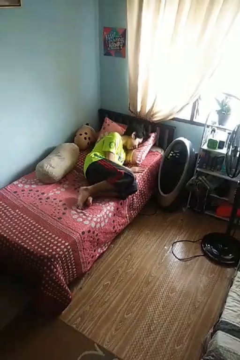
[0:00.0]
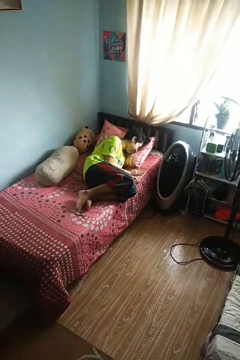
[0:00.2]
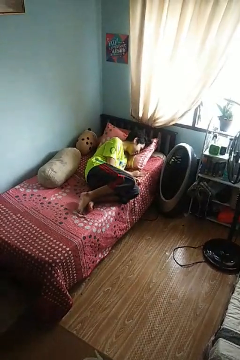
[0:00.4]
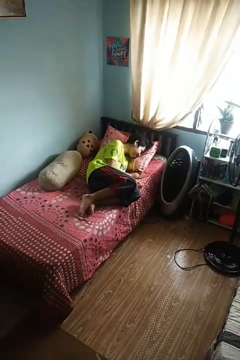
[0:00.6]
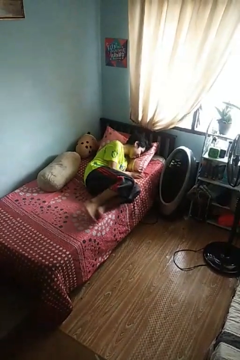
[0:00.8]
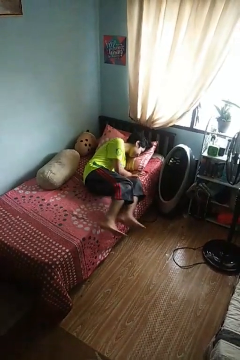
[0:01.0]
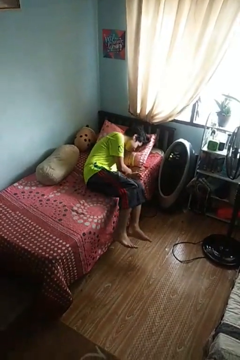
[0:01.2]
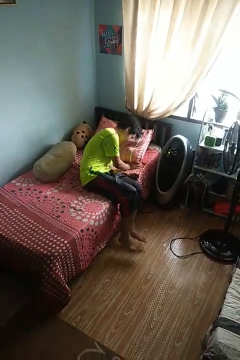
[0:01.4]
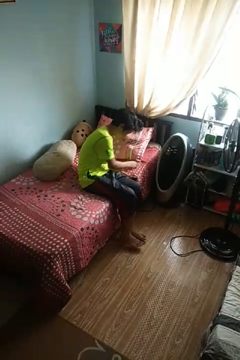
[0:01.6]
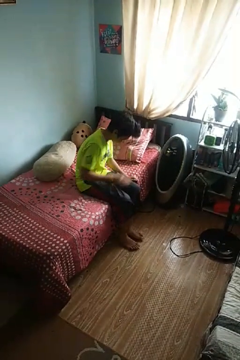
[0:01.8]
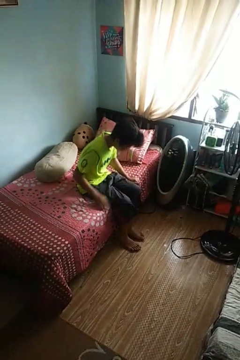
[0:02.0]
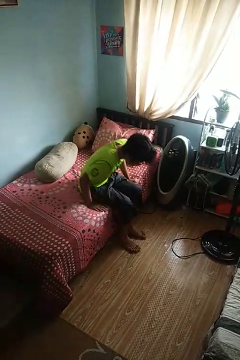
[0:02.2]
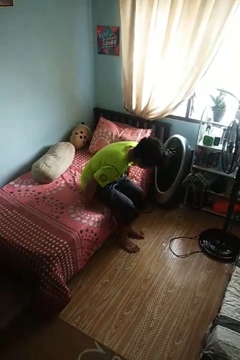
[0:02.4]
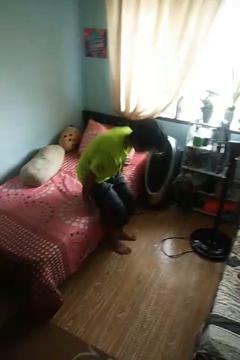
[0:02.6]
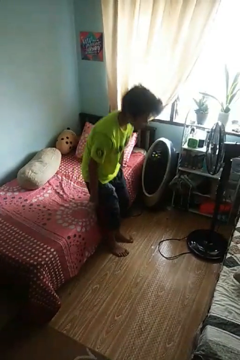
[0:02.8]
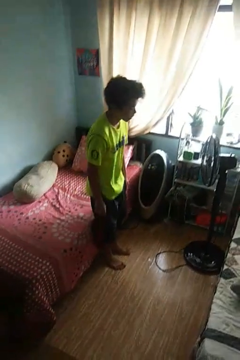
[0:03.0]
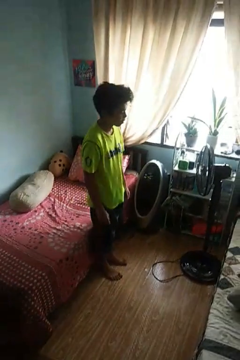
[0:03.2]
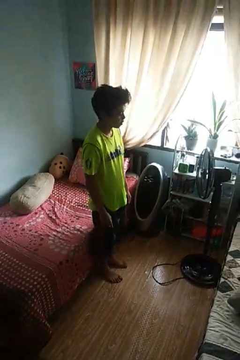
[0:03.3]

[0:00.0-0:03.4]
person stands up

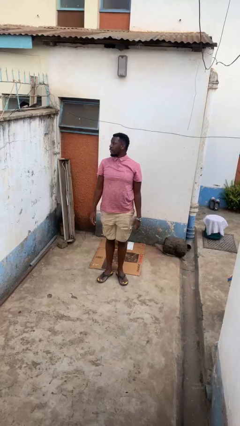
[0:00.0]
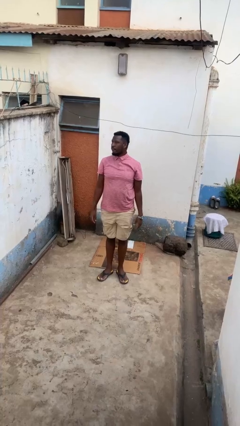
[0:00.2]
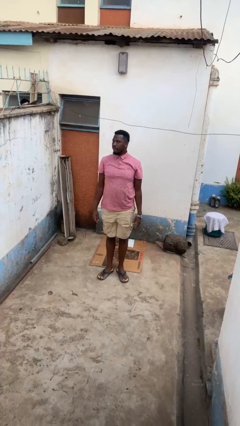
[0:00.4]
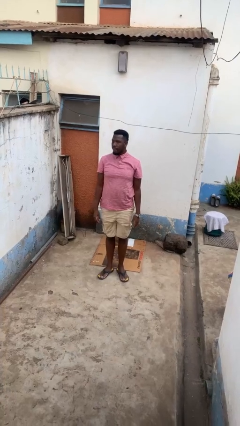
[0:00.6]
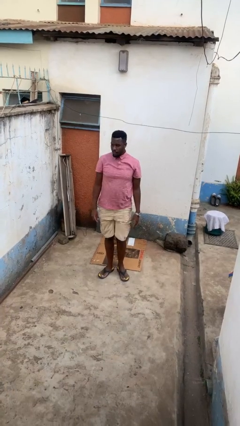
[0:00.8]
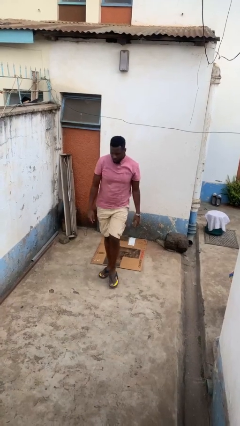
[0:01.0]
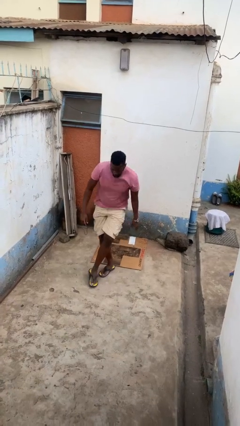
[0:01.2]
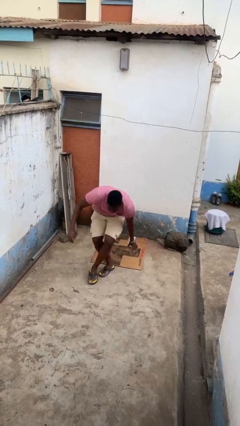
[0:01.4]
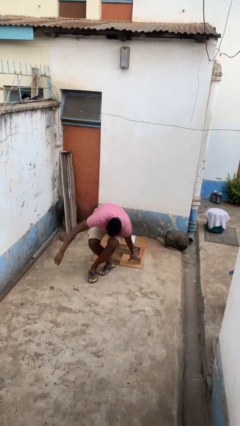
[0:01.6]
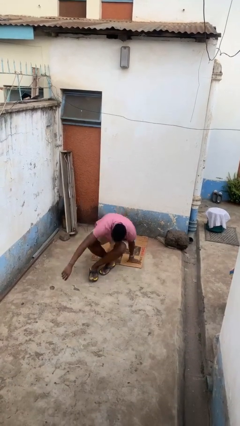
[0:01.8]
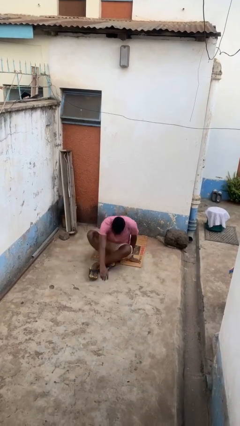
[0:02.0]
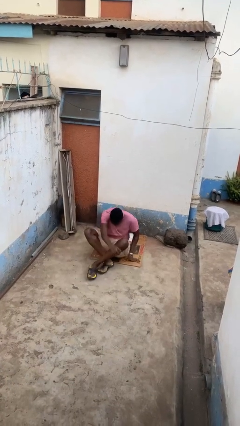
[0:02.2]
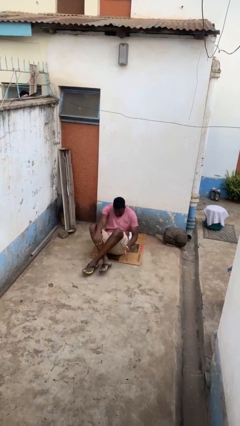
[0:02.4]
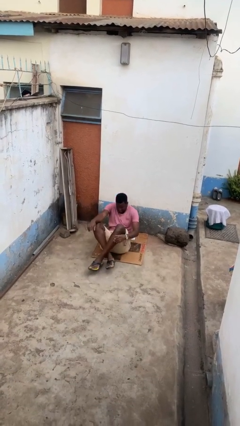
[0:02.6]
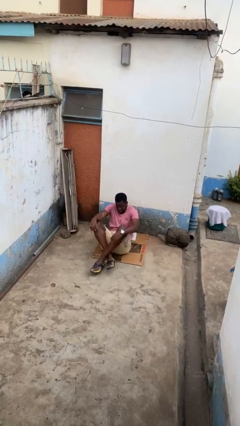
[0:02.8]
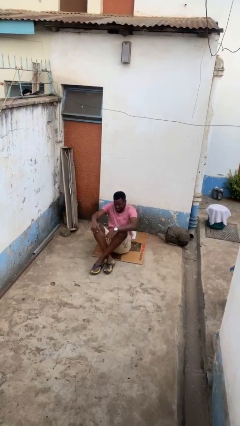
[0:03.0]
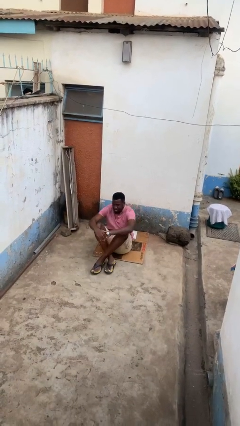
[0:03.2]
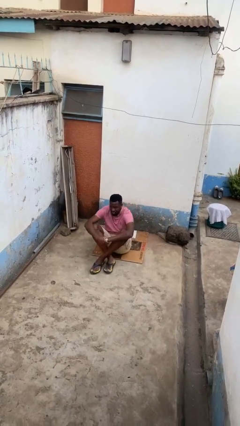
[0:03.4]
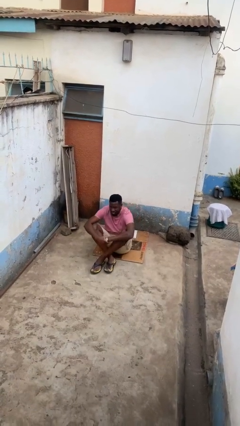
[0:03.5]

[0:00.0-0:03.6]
person sits crisscross

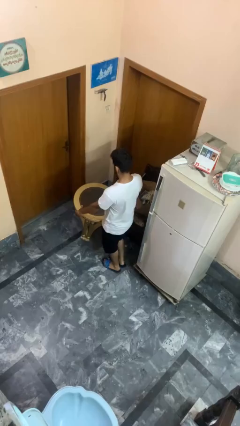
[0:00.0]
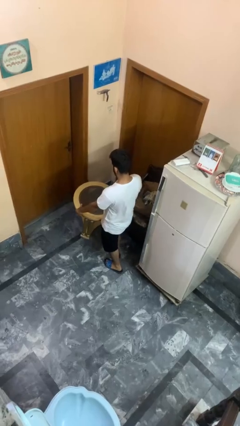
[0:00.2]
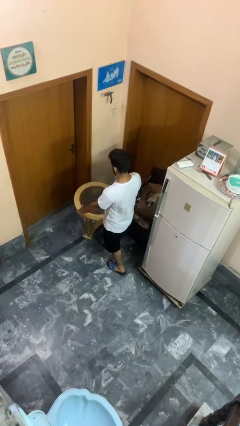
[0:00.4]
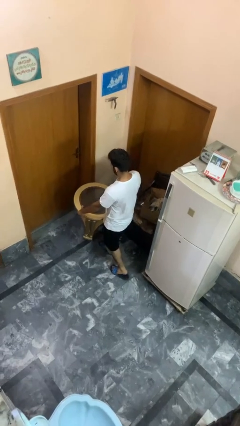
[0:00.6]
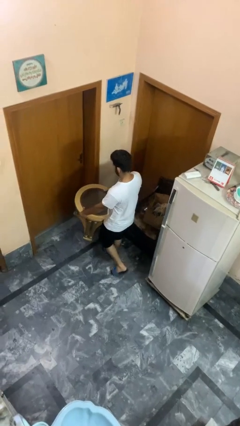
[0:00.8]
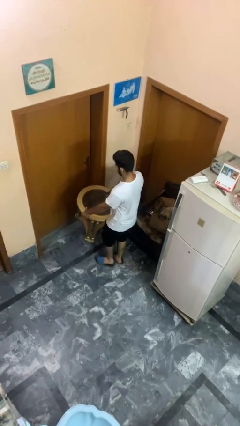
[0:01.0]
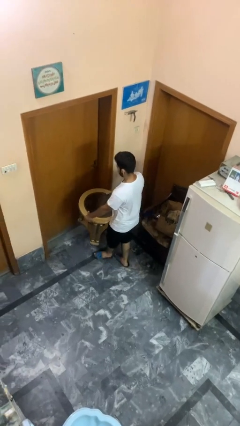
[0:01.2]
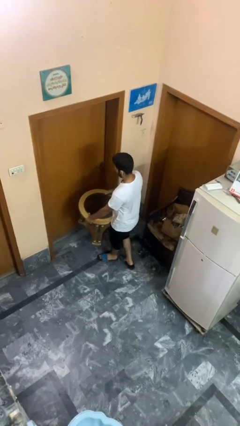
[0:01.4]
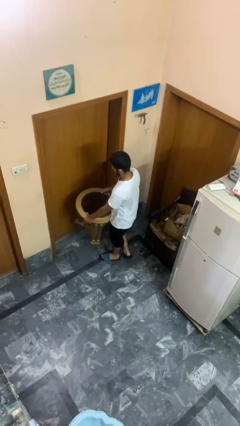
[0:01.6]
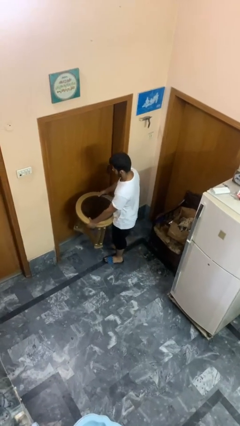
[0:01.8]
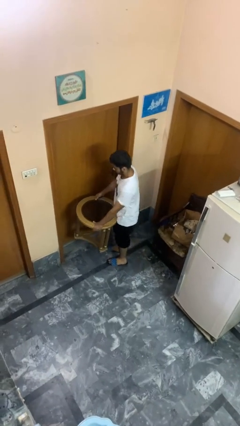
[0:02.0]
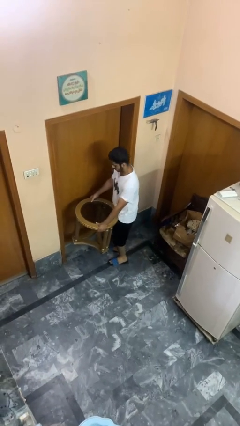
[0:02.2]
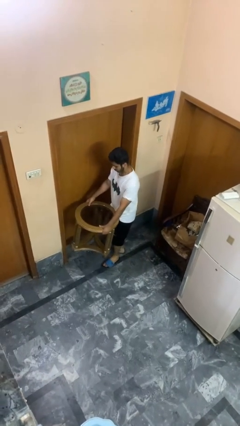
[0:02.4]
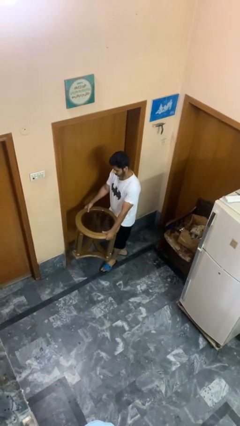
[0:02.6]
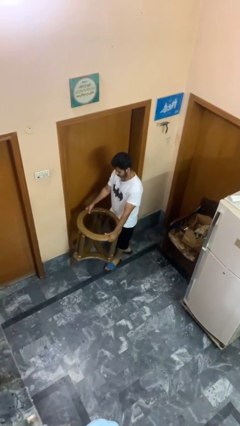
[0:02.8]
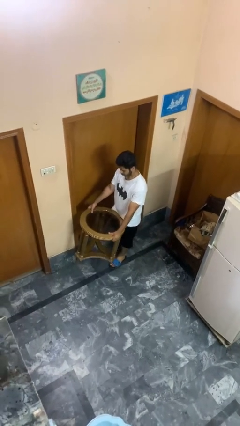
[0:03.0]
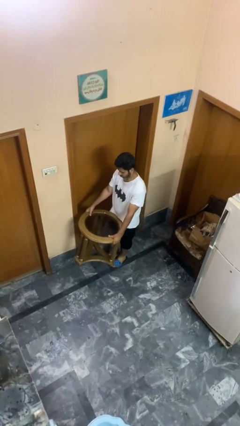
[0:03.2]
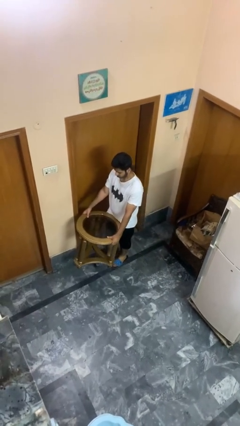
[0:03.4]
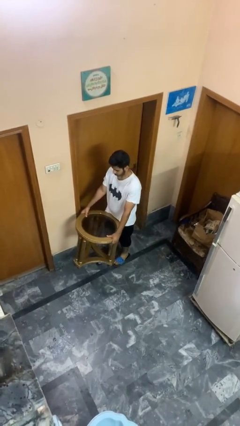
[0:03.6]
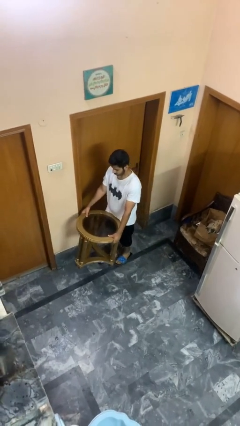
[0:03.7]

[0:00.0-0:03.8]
person carries furniture

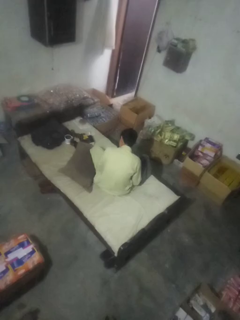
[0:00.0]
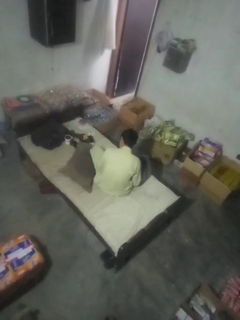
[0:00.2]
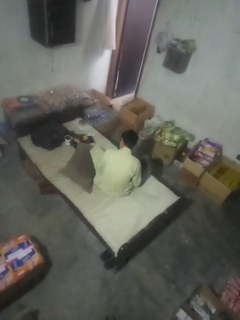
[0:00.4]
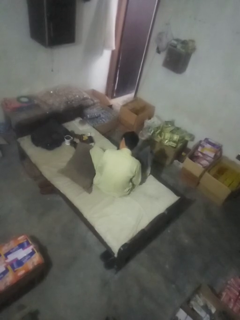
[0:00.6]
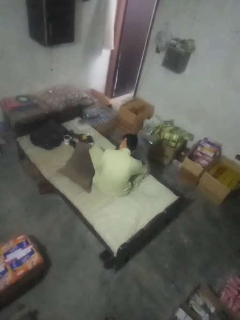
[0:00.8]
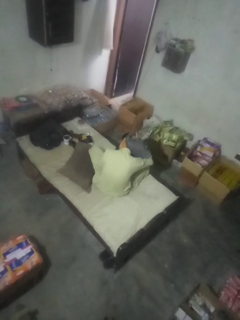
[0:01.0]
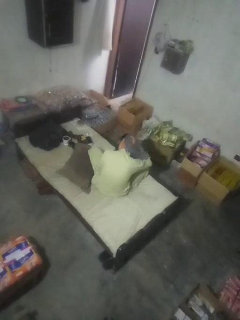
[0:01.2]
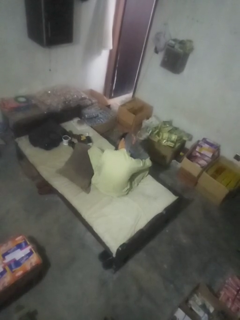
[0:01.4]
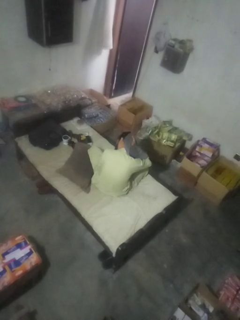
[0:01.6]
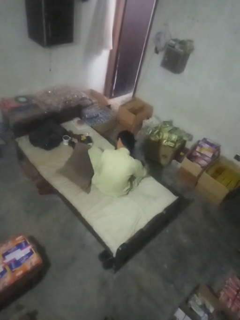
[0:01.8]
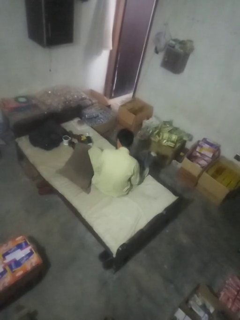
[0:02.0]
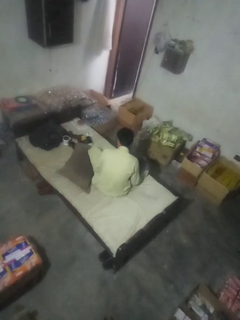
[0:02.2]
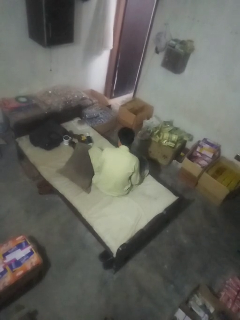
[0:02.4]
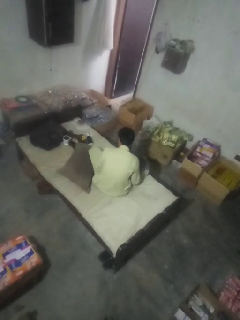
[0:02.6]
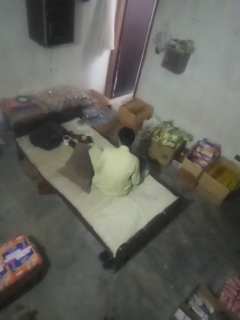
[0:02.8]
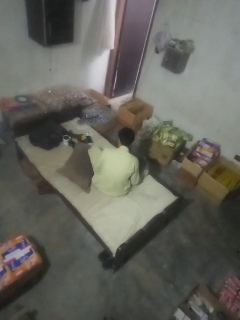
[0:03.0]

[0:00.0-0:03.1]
person dries hair with towel

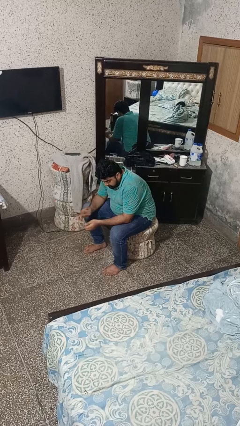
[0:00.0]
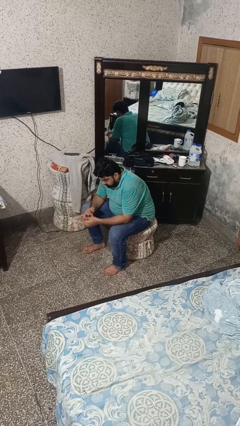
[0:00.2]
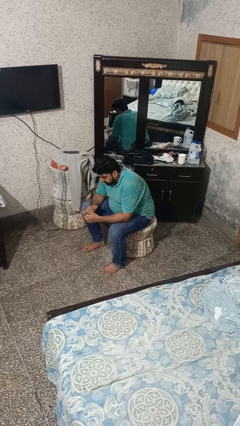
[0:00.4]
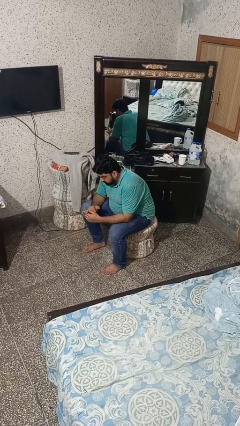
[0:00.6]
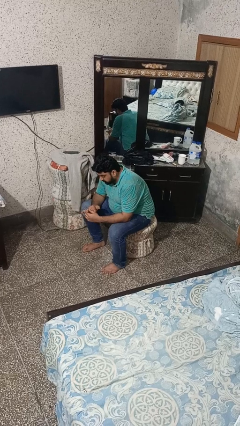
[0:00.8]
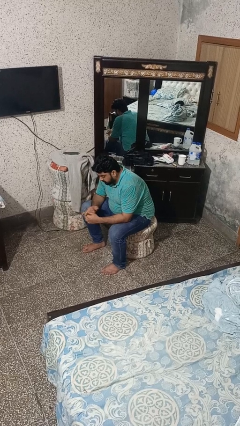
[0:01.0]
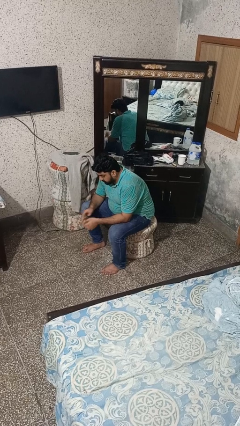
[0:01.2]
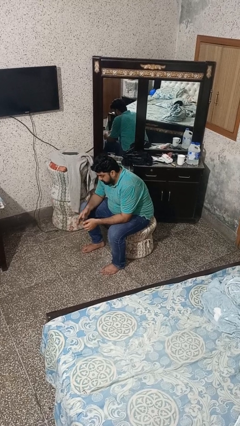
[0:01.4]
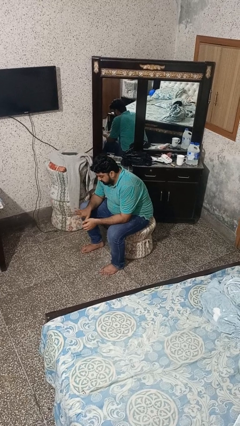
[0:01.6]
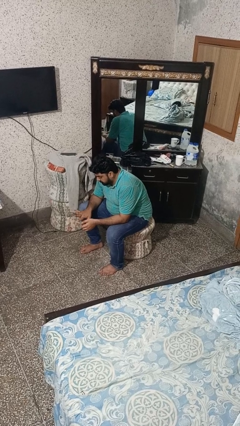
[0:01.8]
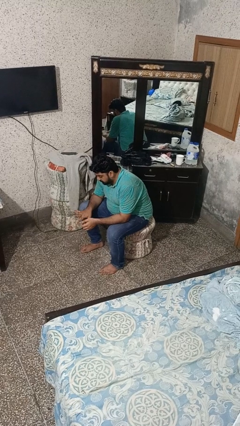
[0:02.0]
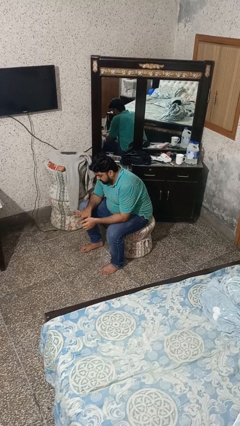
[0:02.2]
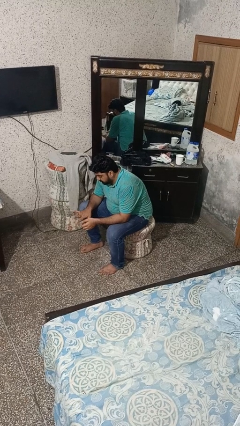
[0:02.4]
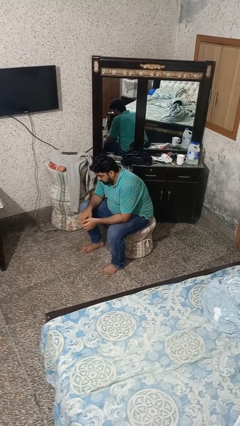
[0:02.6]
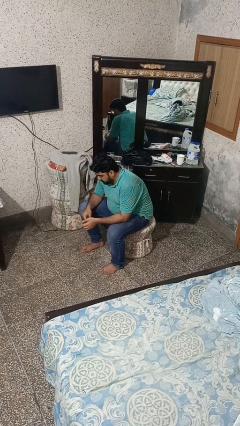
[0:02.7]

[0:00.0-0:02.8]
person puts on ring

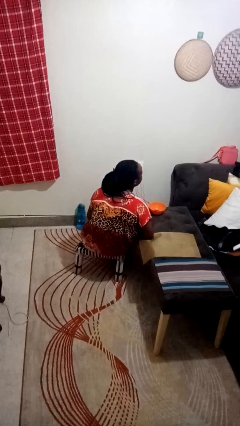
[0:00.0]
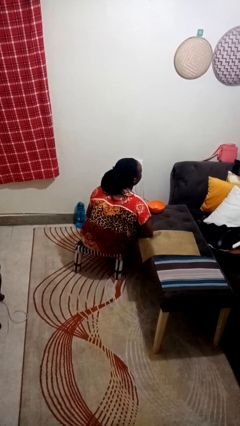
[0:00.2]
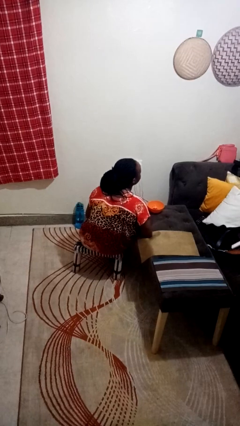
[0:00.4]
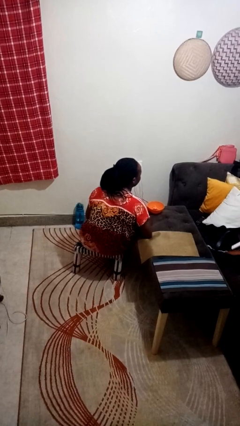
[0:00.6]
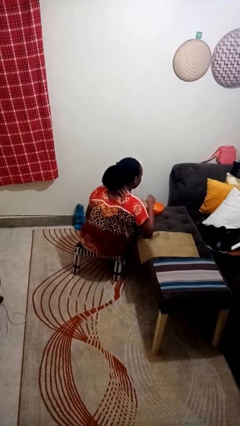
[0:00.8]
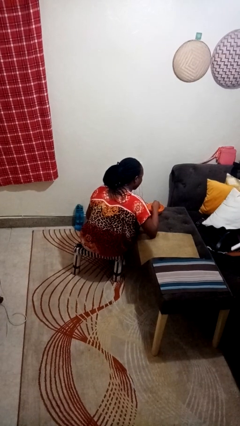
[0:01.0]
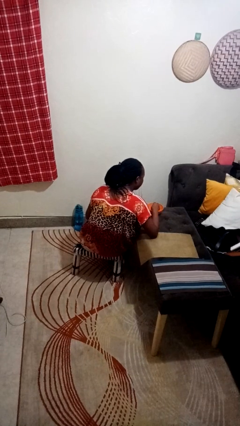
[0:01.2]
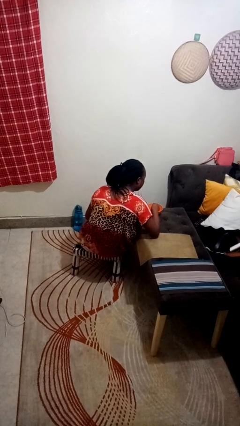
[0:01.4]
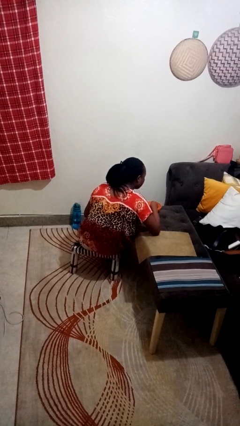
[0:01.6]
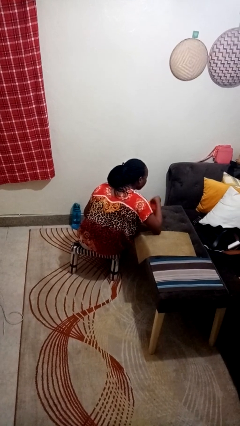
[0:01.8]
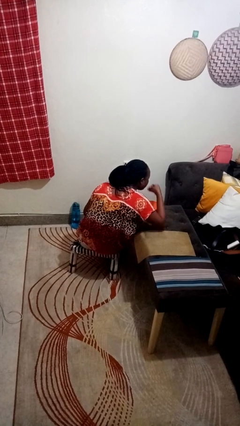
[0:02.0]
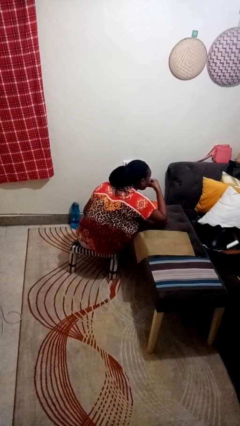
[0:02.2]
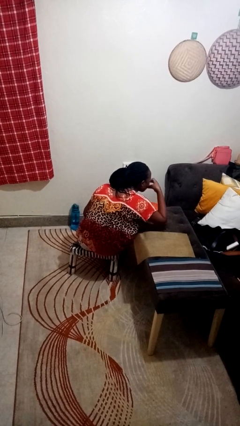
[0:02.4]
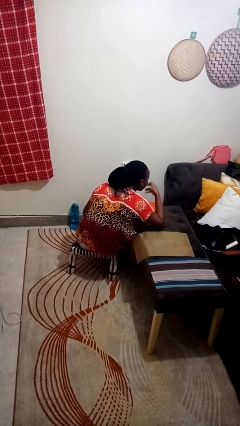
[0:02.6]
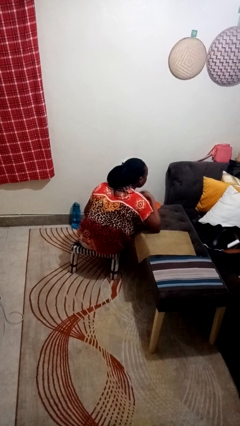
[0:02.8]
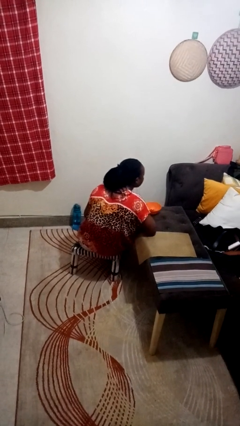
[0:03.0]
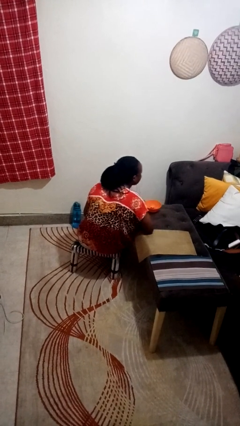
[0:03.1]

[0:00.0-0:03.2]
person eats with hands
